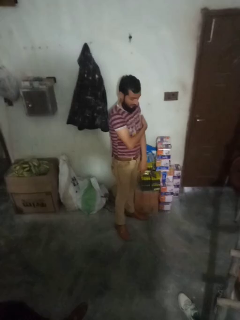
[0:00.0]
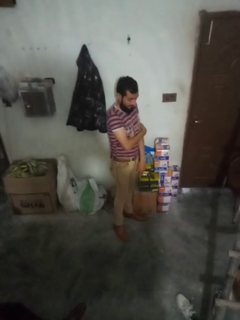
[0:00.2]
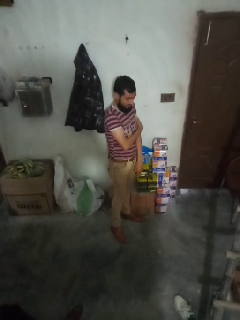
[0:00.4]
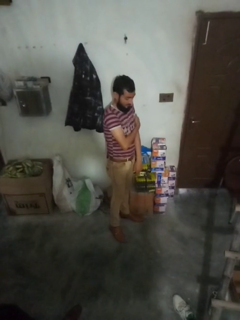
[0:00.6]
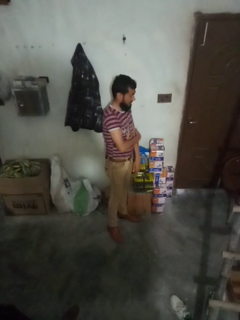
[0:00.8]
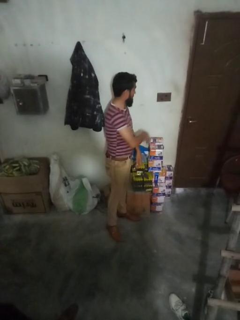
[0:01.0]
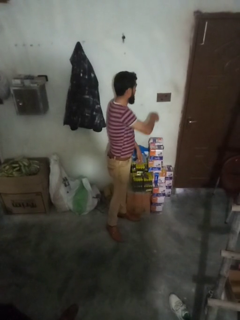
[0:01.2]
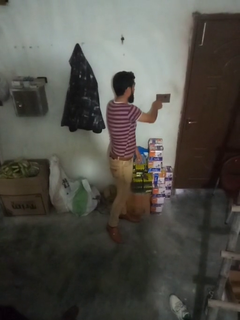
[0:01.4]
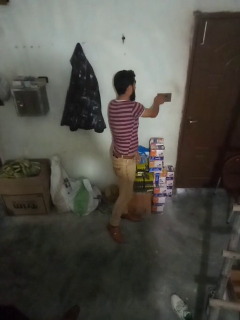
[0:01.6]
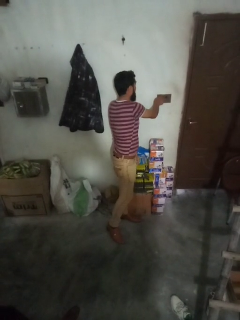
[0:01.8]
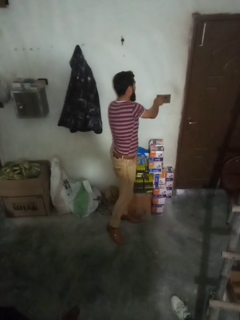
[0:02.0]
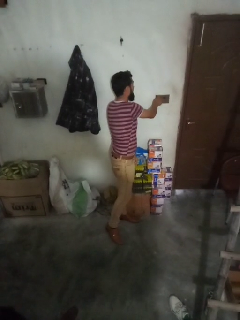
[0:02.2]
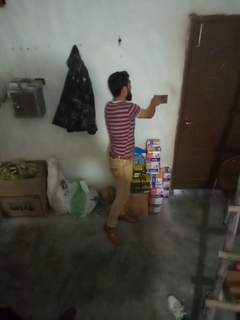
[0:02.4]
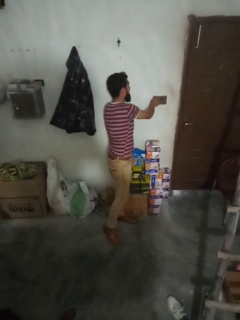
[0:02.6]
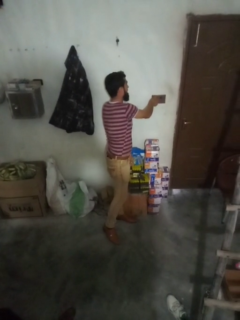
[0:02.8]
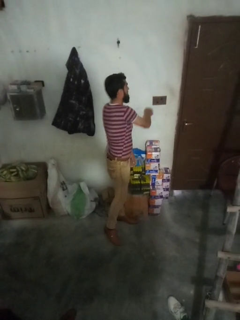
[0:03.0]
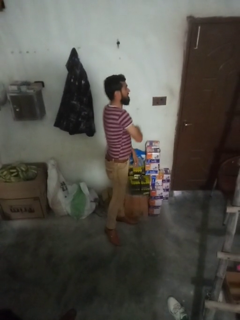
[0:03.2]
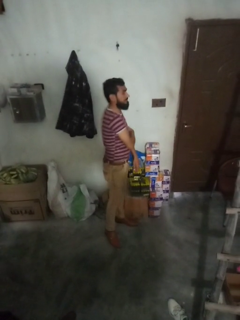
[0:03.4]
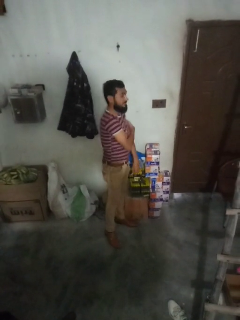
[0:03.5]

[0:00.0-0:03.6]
person adjusts thermostat

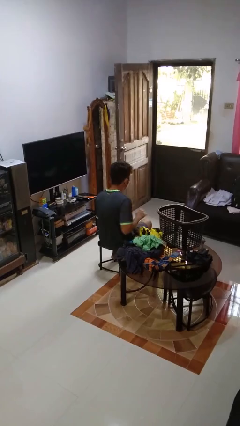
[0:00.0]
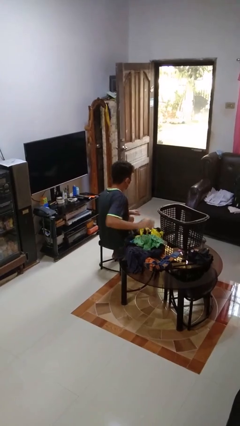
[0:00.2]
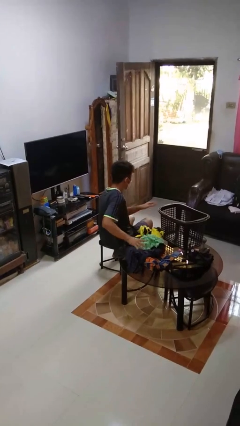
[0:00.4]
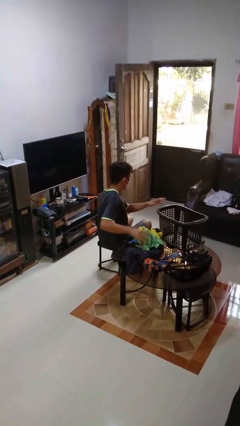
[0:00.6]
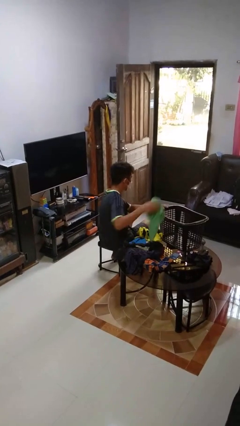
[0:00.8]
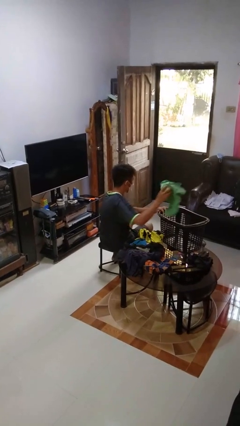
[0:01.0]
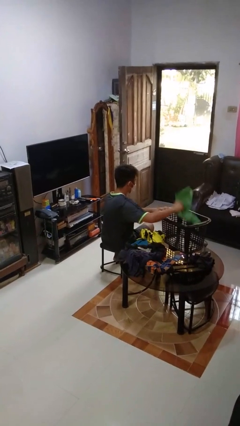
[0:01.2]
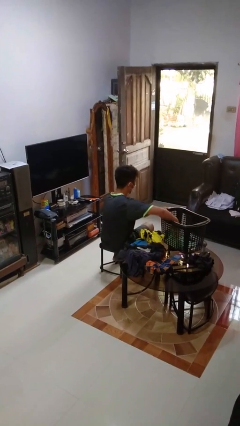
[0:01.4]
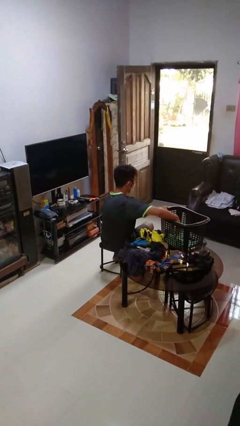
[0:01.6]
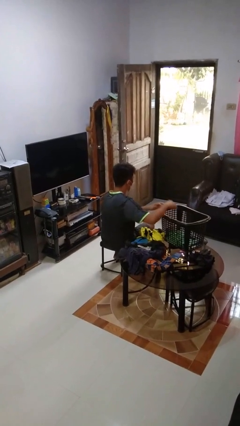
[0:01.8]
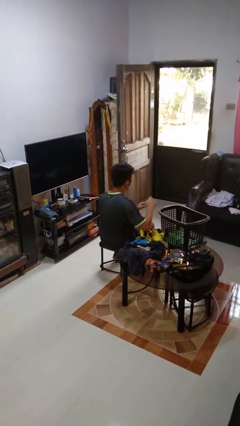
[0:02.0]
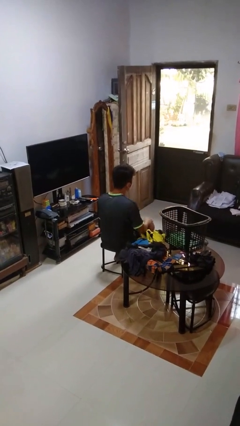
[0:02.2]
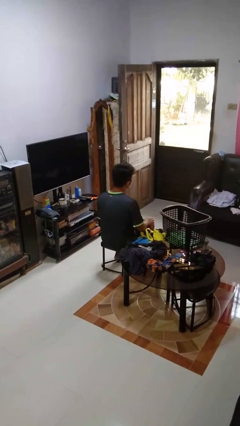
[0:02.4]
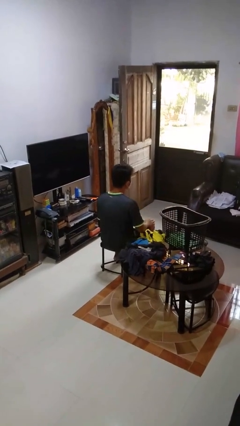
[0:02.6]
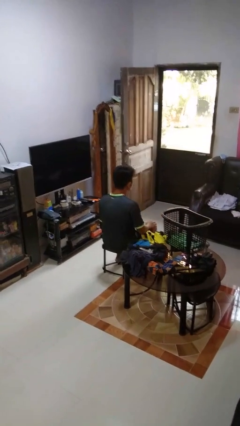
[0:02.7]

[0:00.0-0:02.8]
person puts object into basket

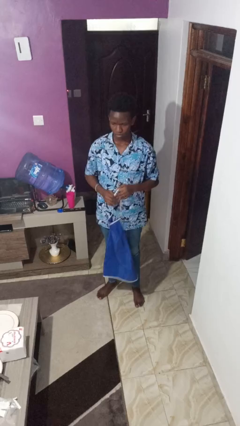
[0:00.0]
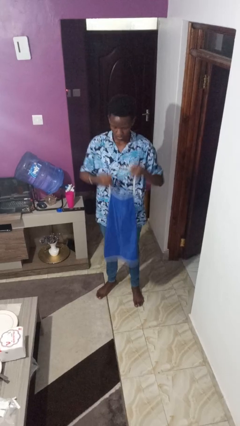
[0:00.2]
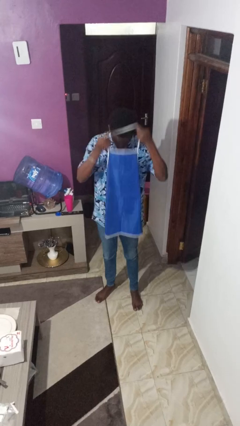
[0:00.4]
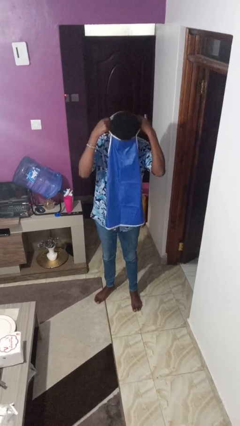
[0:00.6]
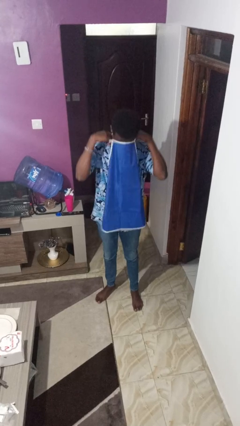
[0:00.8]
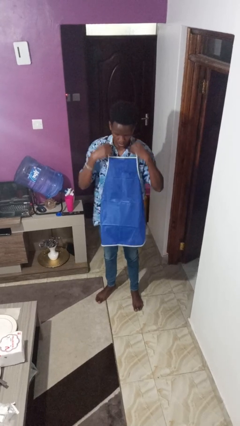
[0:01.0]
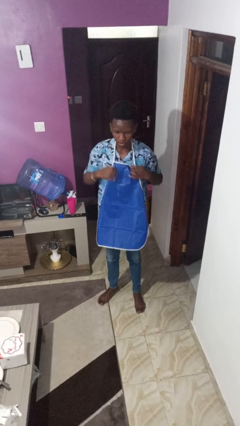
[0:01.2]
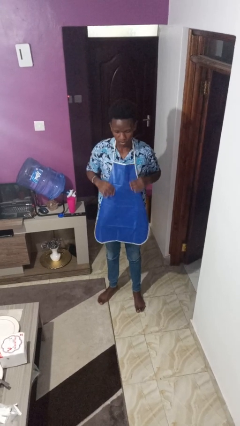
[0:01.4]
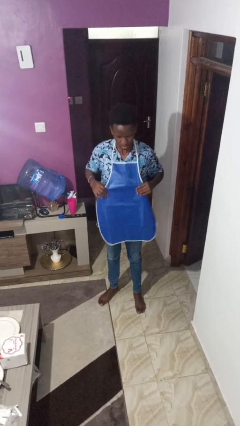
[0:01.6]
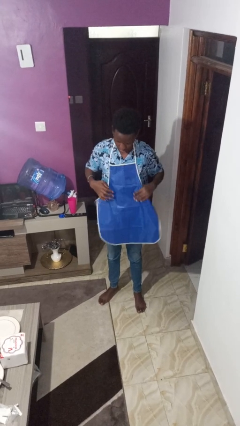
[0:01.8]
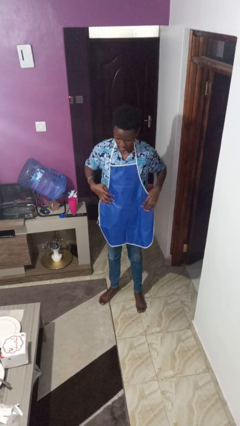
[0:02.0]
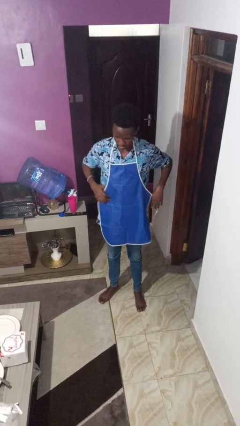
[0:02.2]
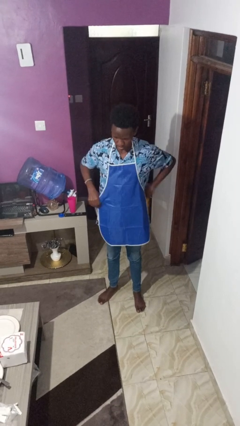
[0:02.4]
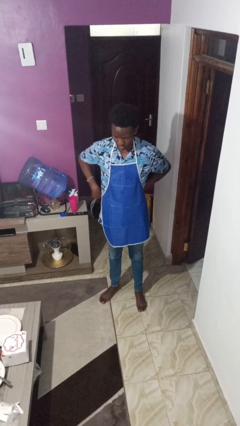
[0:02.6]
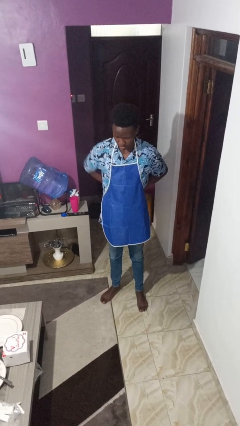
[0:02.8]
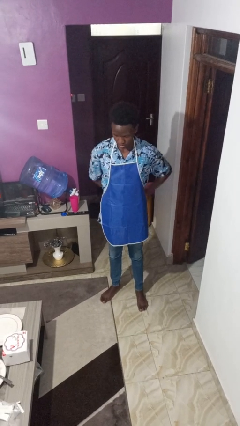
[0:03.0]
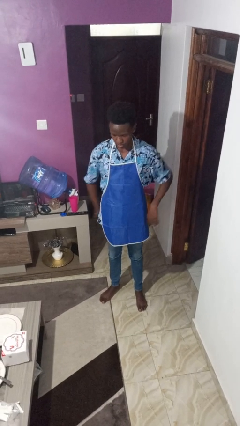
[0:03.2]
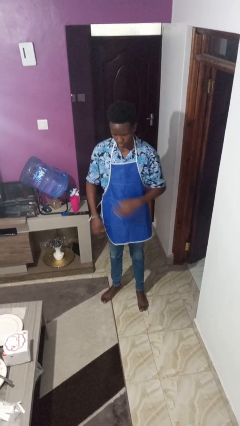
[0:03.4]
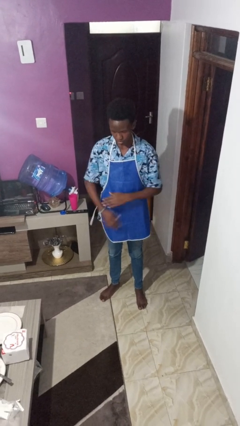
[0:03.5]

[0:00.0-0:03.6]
person puts on apron

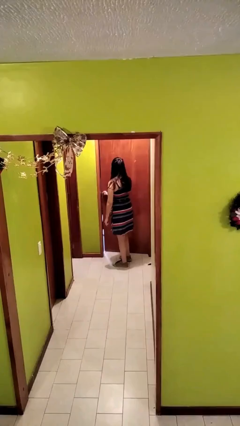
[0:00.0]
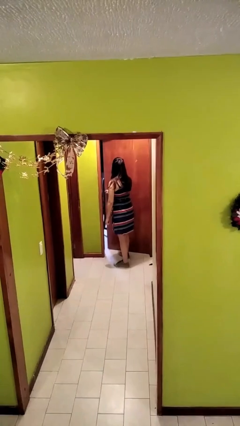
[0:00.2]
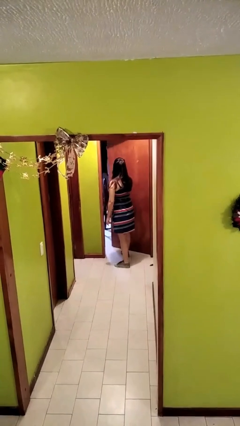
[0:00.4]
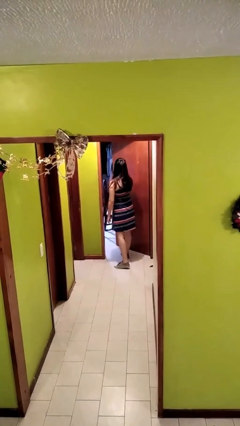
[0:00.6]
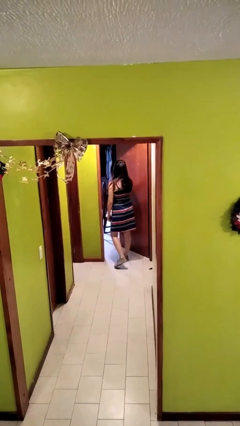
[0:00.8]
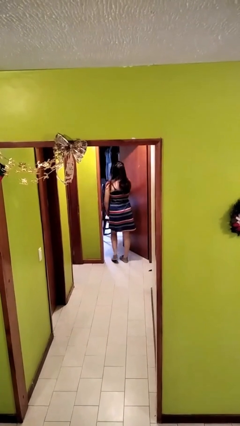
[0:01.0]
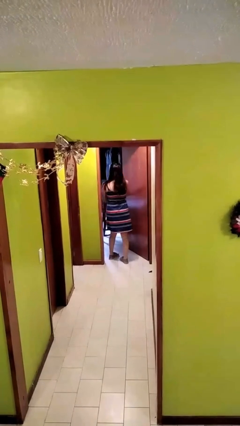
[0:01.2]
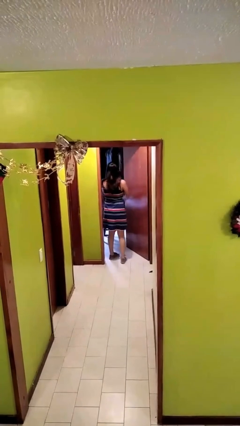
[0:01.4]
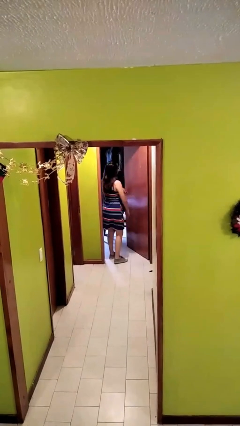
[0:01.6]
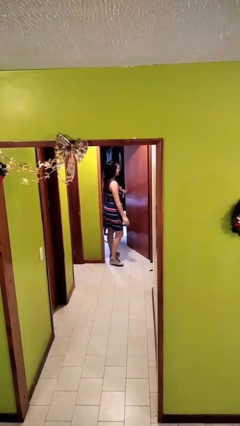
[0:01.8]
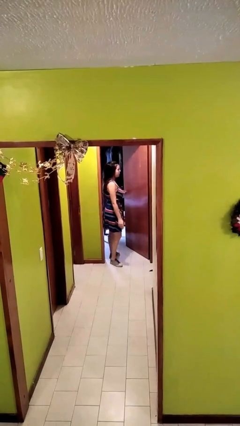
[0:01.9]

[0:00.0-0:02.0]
person opens facility door

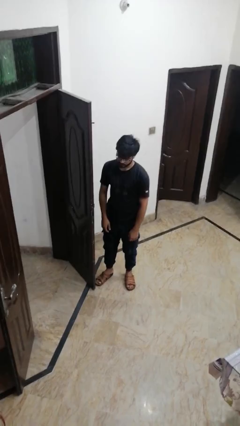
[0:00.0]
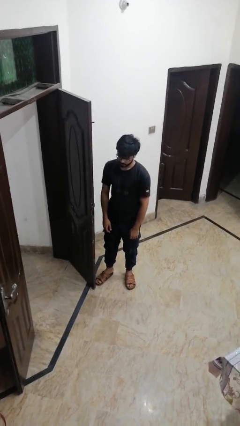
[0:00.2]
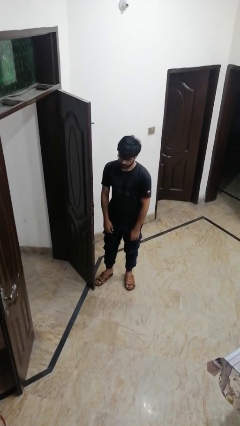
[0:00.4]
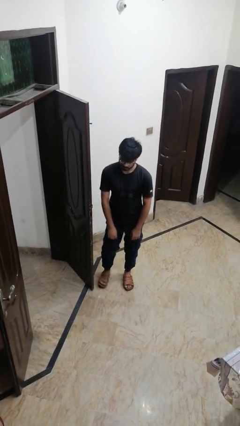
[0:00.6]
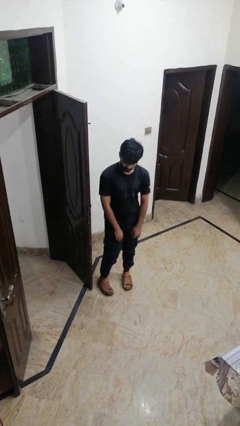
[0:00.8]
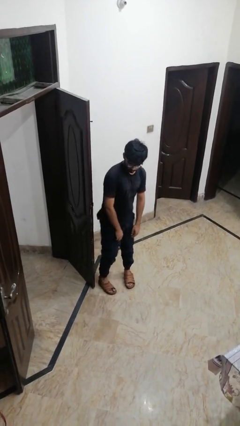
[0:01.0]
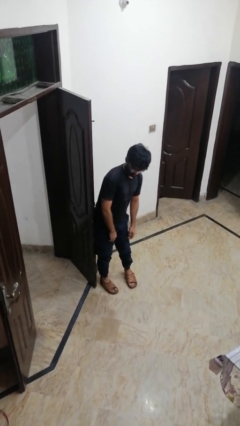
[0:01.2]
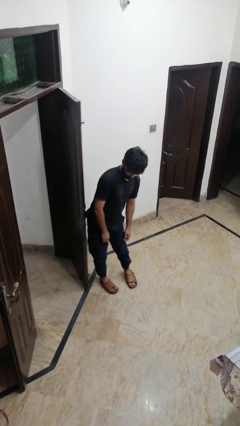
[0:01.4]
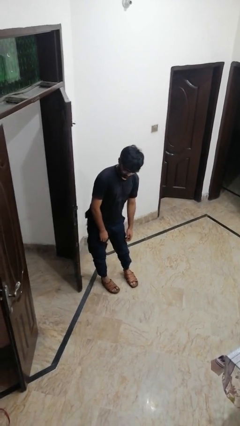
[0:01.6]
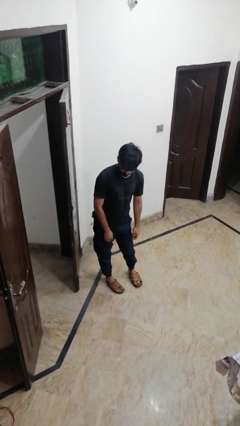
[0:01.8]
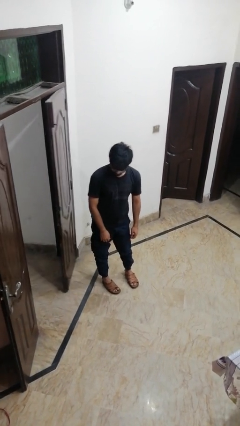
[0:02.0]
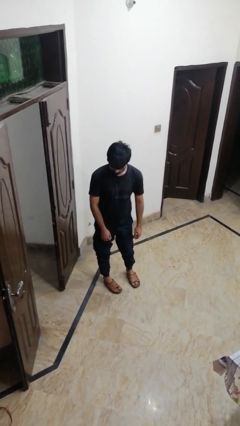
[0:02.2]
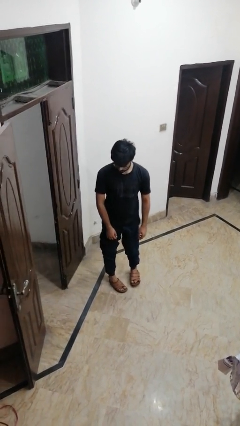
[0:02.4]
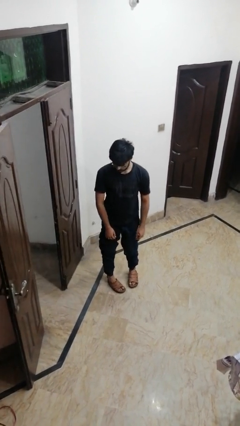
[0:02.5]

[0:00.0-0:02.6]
person closes door with hip

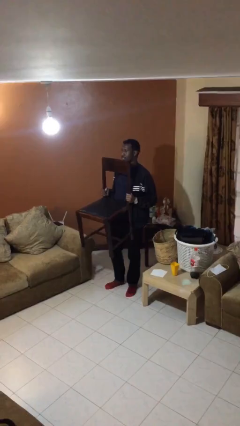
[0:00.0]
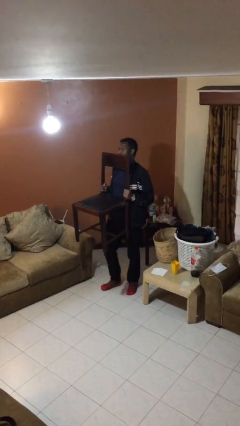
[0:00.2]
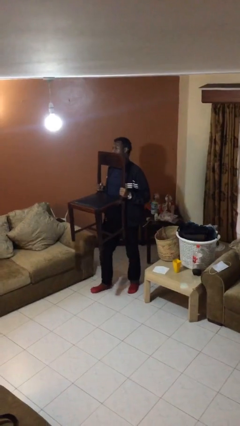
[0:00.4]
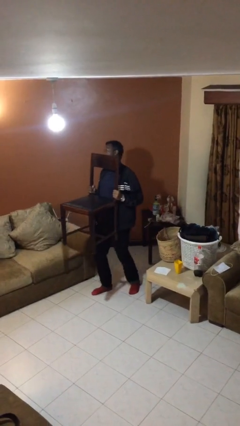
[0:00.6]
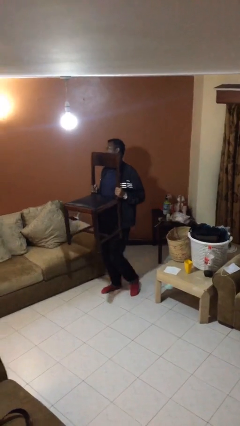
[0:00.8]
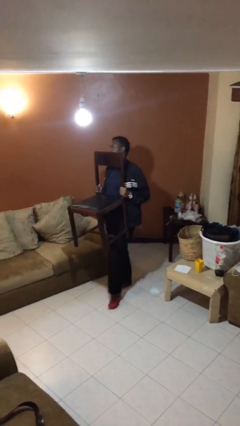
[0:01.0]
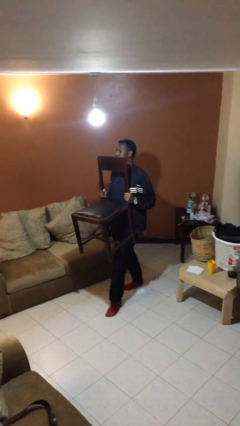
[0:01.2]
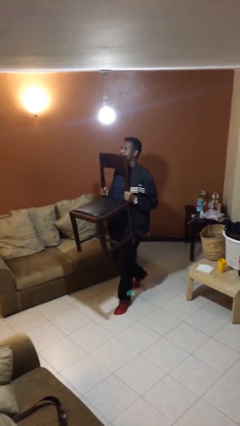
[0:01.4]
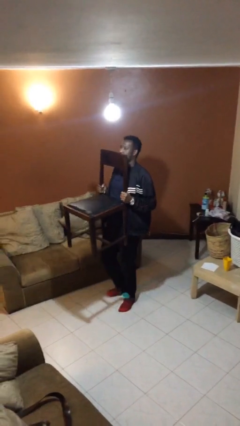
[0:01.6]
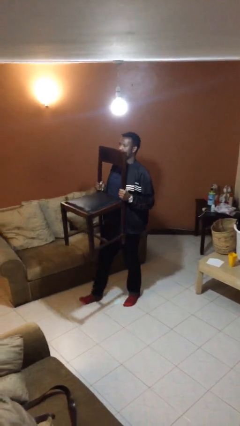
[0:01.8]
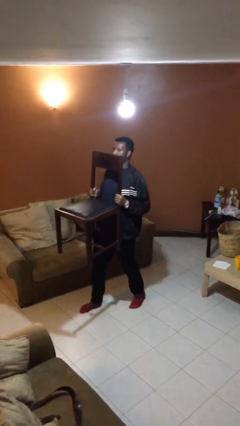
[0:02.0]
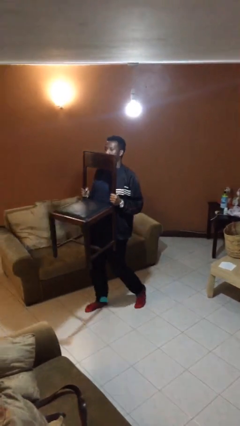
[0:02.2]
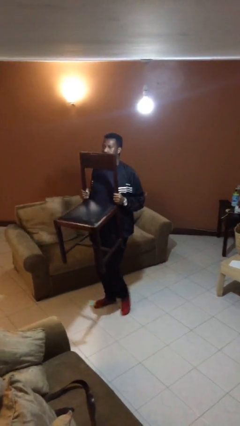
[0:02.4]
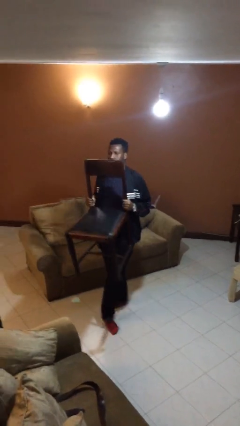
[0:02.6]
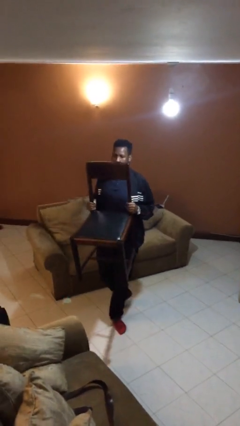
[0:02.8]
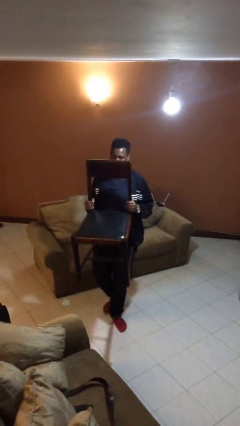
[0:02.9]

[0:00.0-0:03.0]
person carries furniture

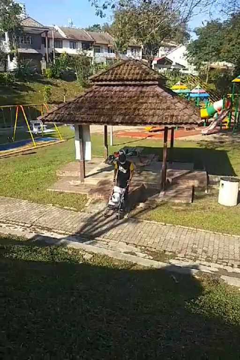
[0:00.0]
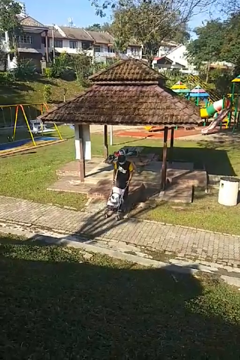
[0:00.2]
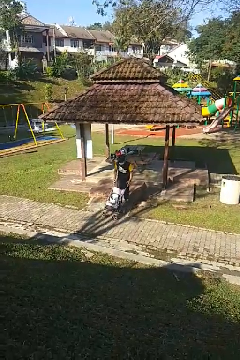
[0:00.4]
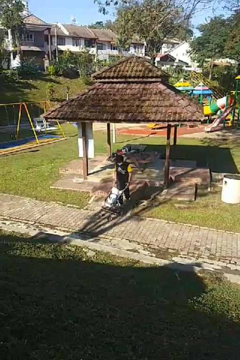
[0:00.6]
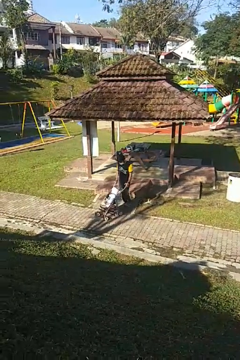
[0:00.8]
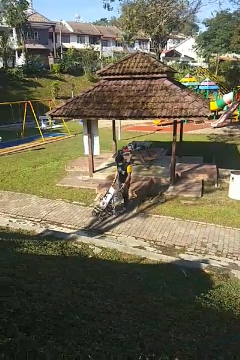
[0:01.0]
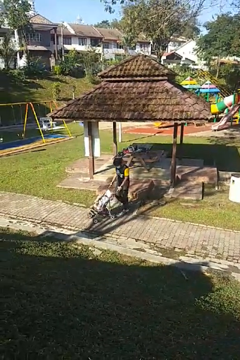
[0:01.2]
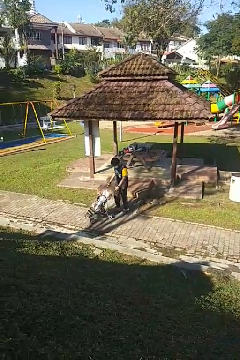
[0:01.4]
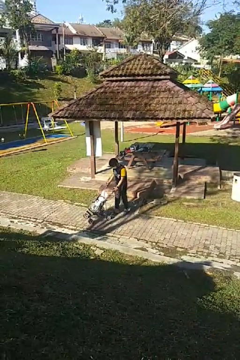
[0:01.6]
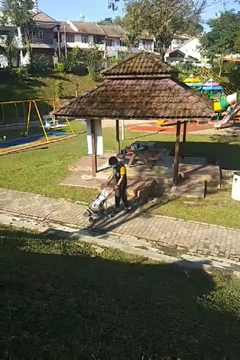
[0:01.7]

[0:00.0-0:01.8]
person pushes wheeled cart
